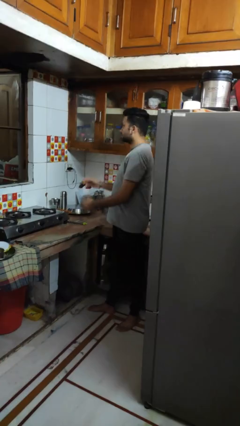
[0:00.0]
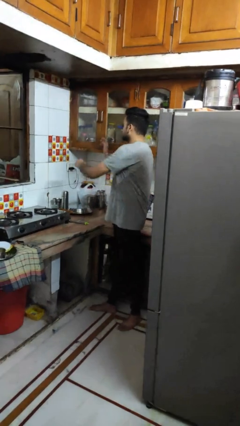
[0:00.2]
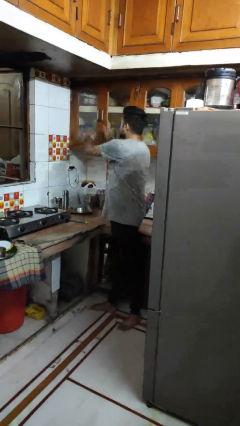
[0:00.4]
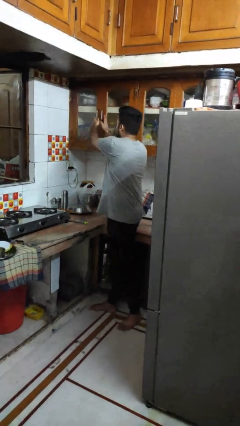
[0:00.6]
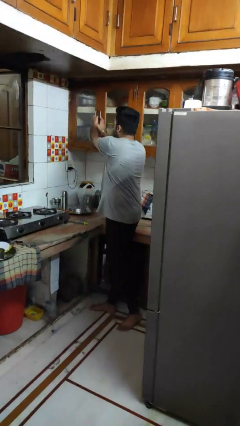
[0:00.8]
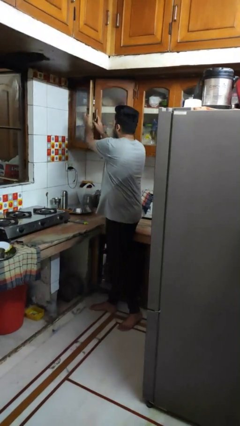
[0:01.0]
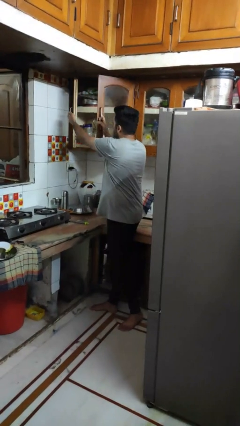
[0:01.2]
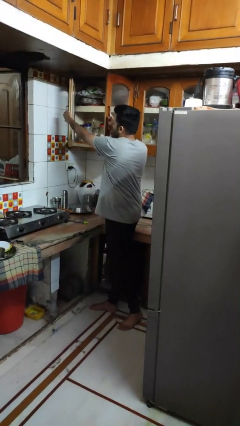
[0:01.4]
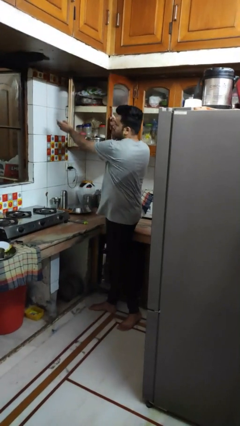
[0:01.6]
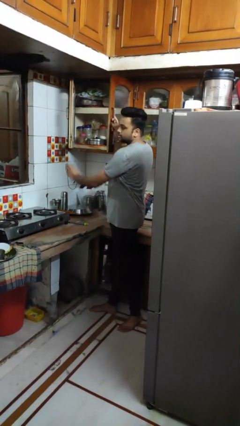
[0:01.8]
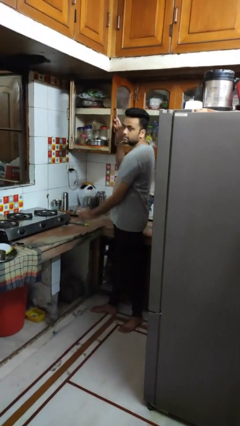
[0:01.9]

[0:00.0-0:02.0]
person opens cabinet

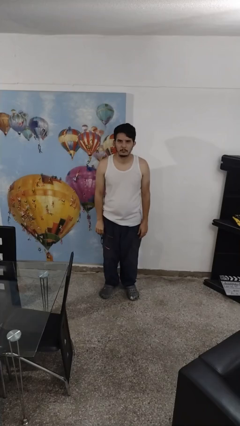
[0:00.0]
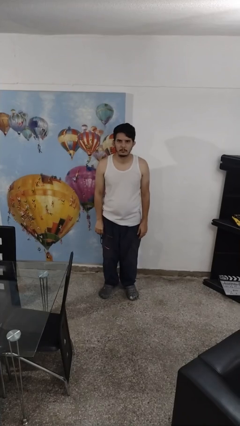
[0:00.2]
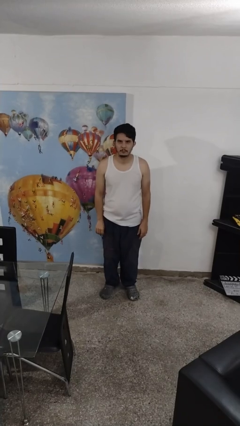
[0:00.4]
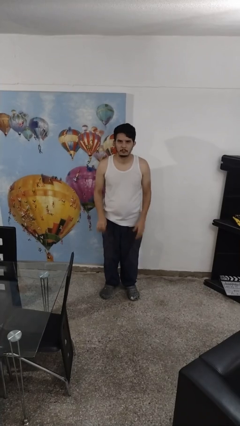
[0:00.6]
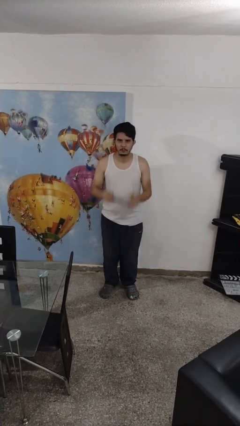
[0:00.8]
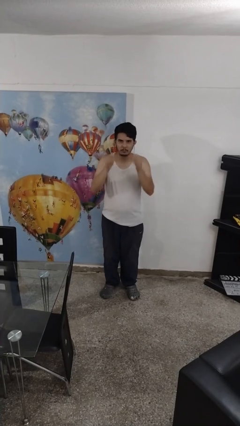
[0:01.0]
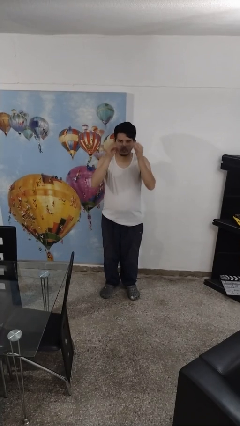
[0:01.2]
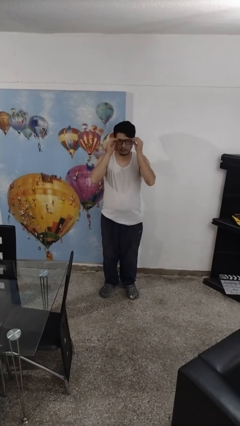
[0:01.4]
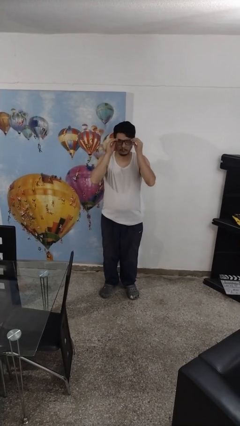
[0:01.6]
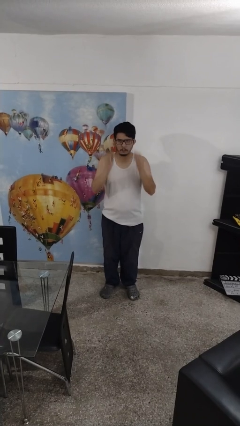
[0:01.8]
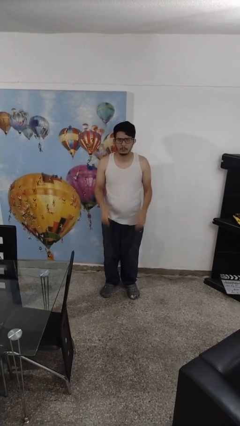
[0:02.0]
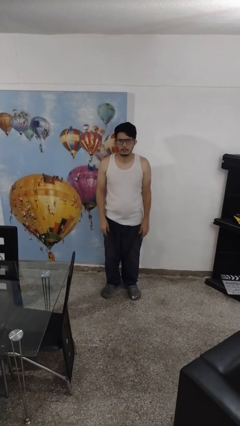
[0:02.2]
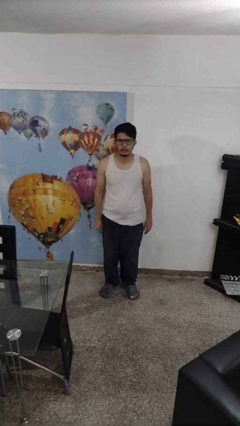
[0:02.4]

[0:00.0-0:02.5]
person puts on glasses

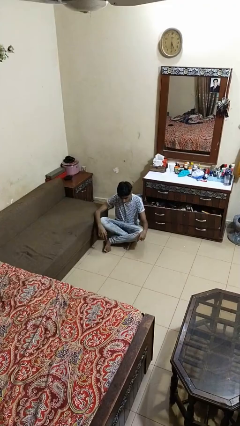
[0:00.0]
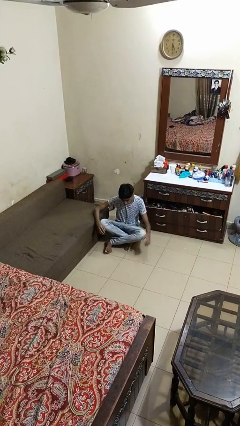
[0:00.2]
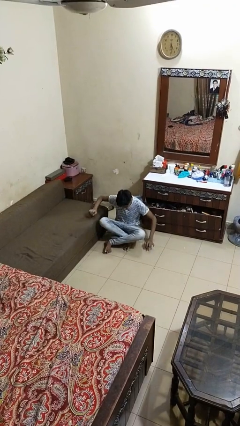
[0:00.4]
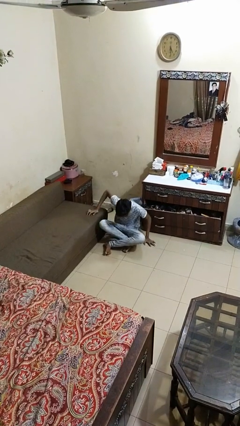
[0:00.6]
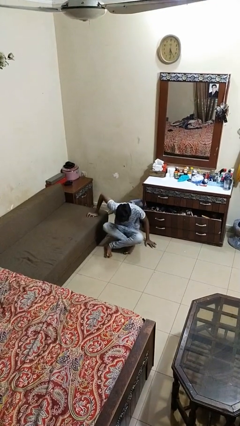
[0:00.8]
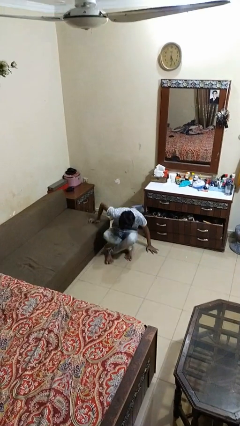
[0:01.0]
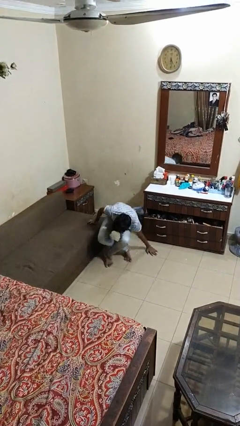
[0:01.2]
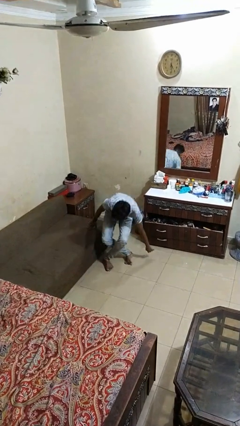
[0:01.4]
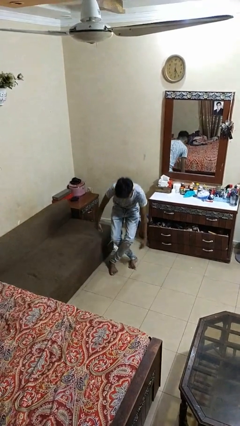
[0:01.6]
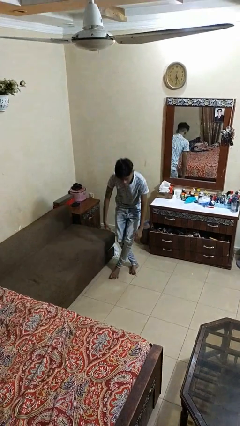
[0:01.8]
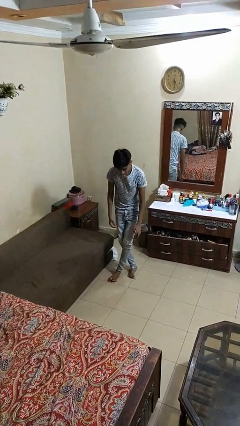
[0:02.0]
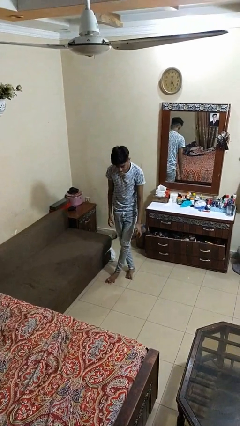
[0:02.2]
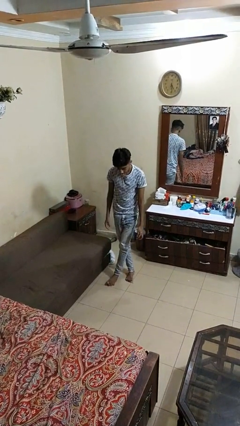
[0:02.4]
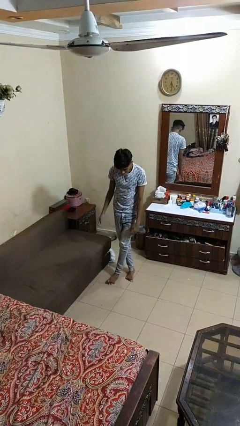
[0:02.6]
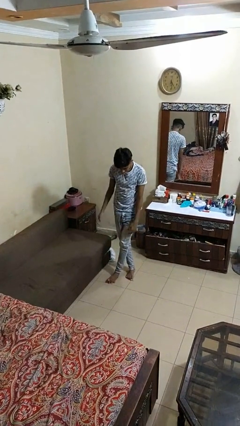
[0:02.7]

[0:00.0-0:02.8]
person stands up from floor

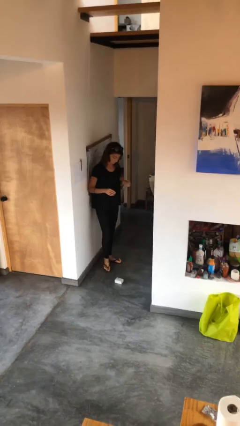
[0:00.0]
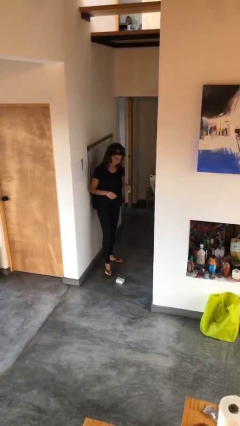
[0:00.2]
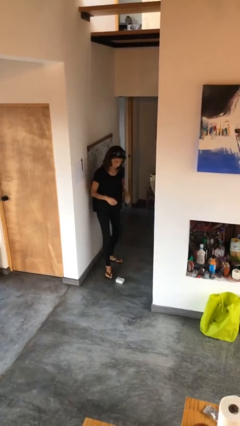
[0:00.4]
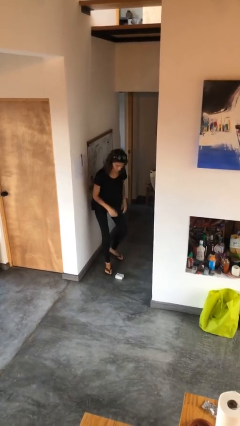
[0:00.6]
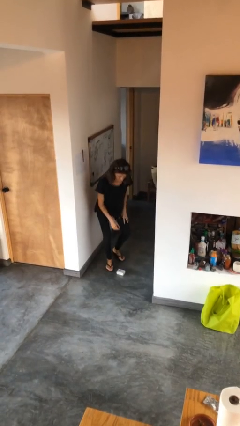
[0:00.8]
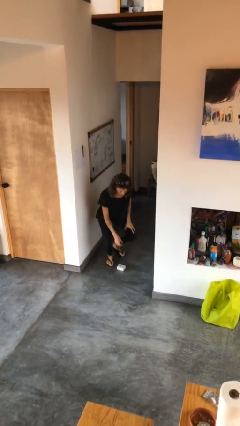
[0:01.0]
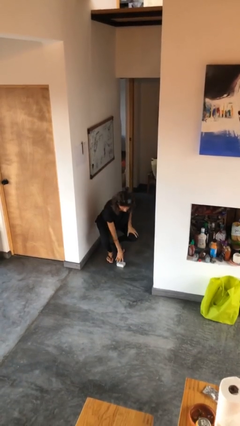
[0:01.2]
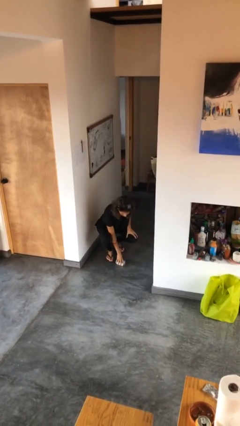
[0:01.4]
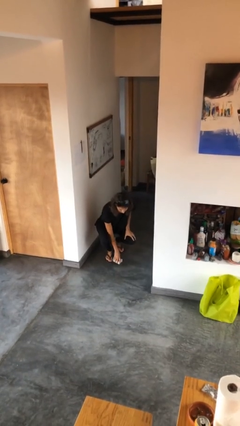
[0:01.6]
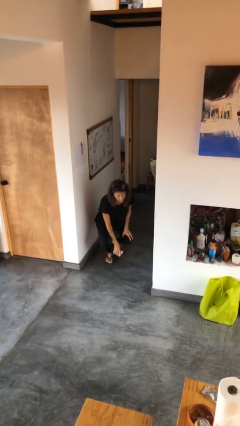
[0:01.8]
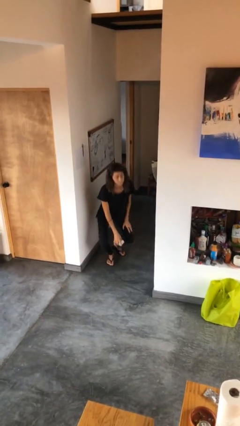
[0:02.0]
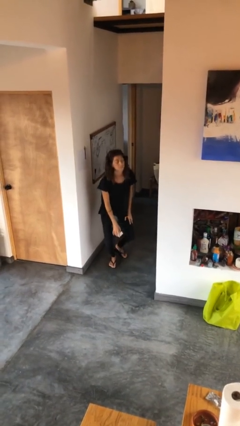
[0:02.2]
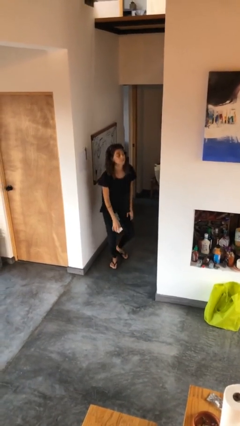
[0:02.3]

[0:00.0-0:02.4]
person picks up object from floor

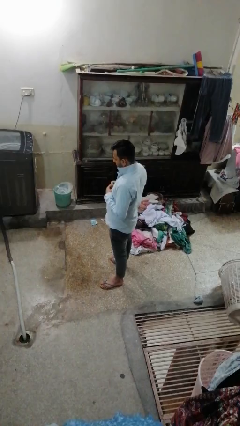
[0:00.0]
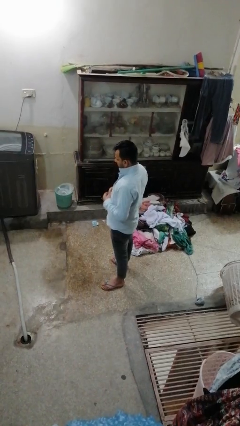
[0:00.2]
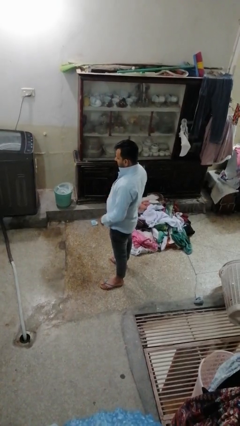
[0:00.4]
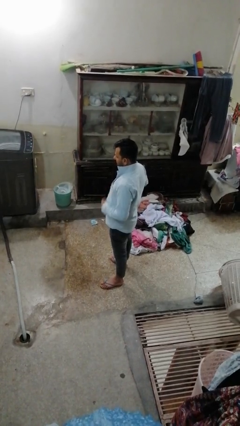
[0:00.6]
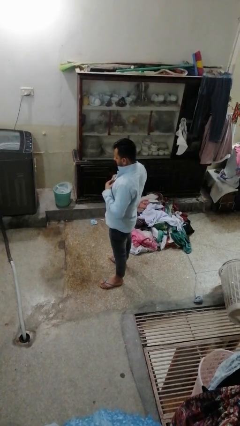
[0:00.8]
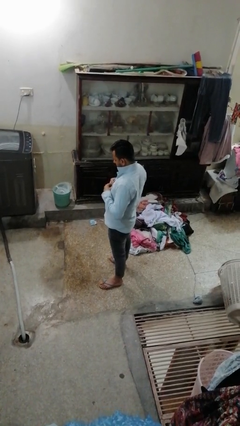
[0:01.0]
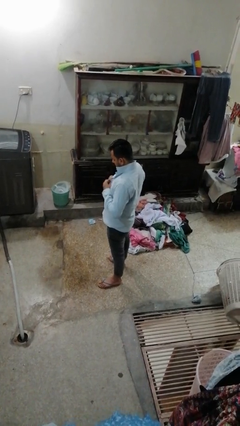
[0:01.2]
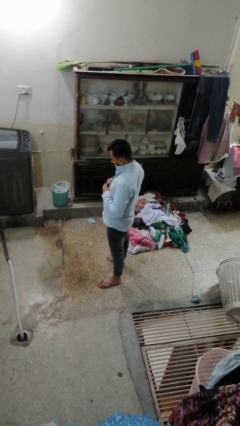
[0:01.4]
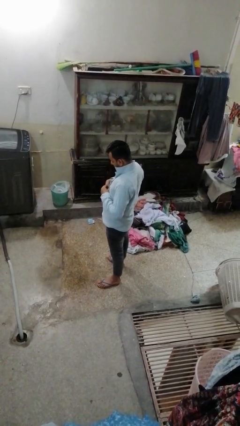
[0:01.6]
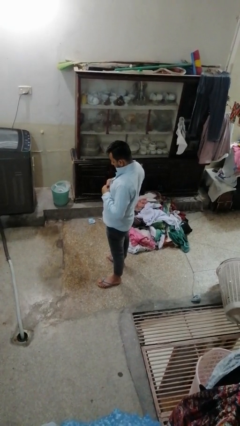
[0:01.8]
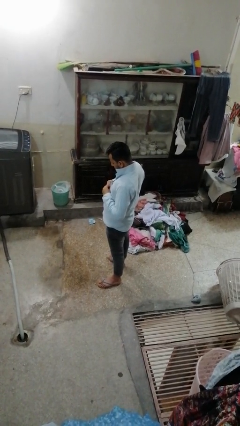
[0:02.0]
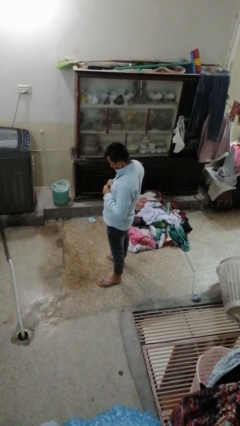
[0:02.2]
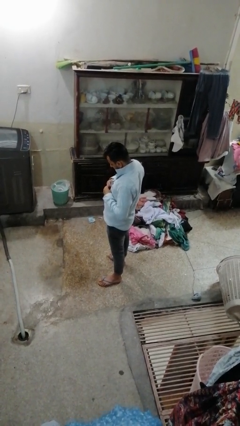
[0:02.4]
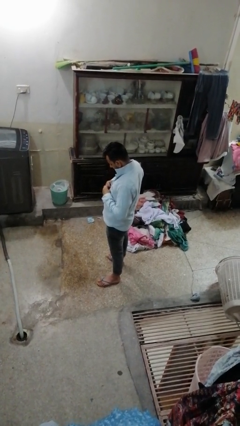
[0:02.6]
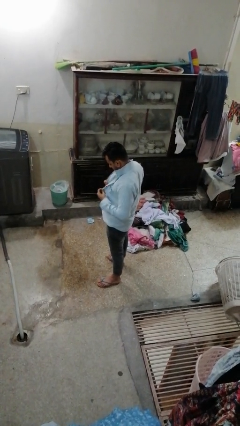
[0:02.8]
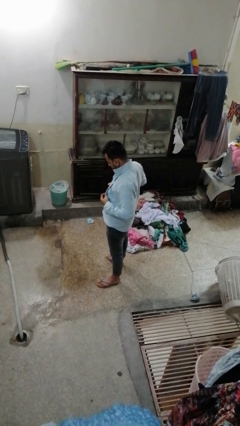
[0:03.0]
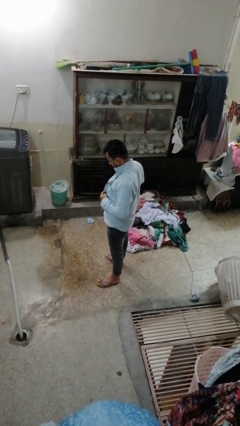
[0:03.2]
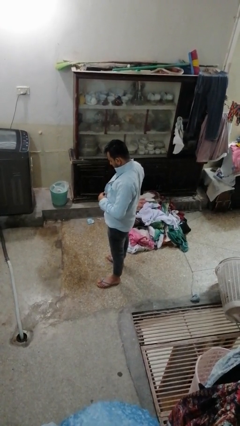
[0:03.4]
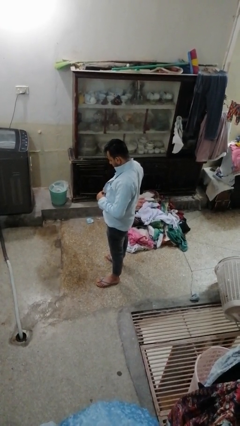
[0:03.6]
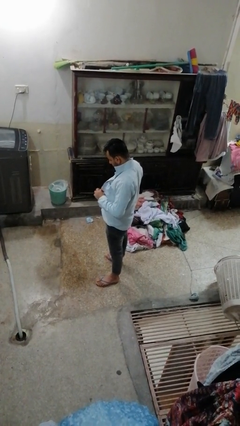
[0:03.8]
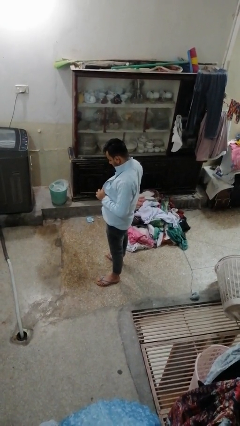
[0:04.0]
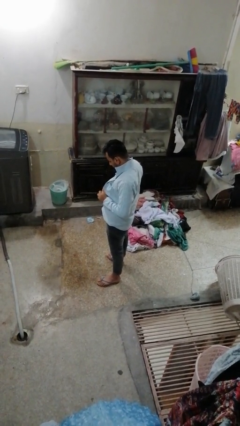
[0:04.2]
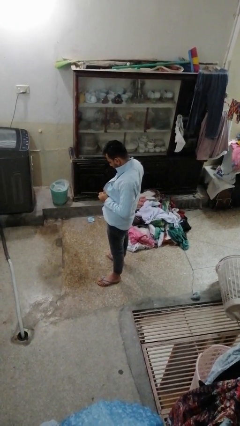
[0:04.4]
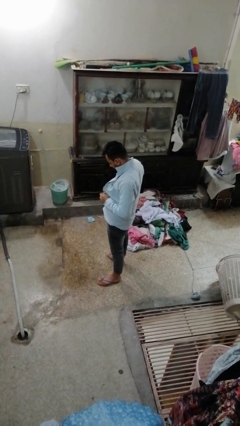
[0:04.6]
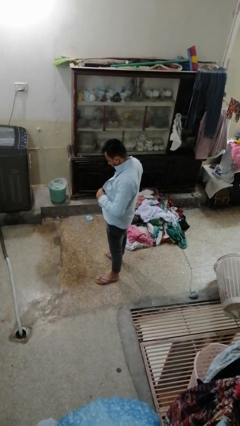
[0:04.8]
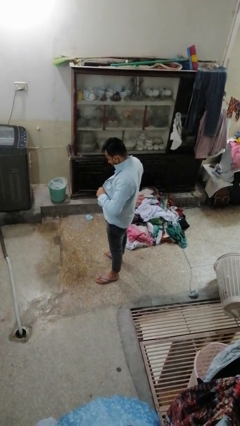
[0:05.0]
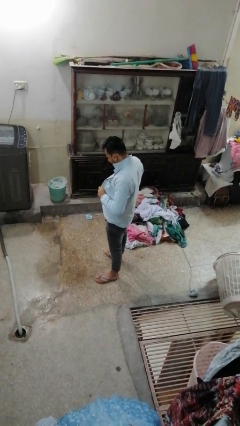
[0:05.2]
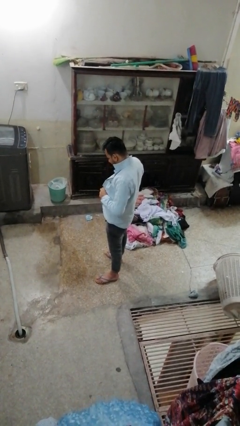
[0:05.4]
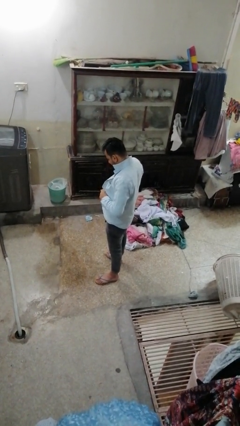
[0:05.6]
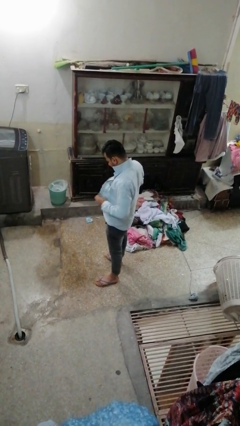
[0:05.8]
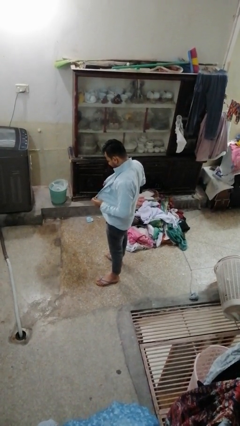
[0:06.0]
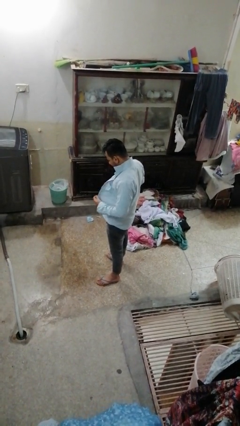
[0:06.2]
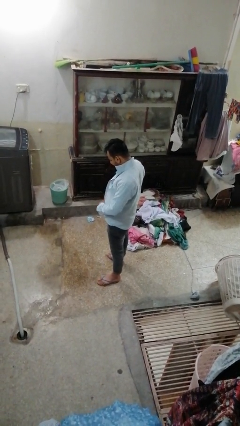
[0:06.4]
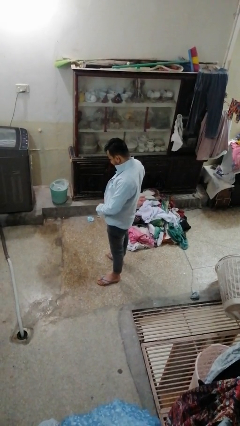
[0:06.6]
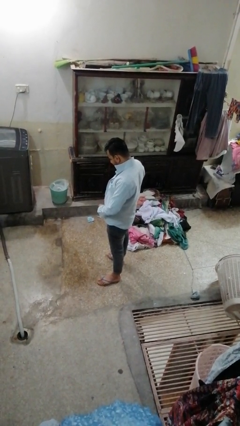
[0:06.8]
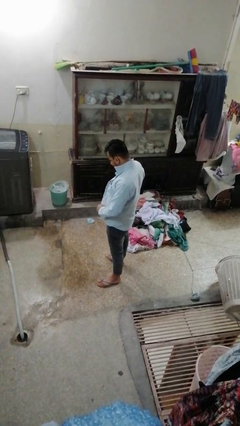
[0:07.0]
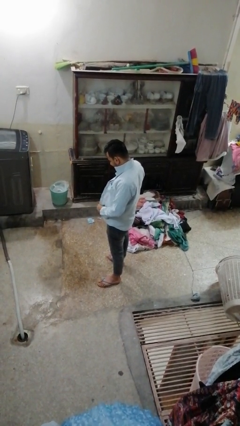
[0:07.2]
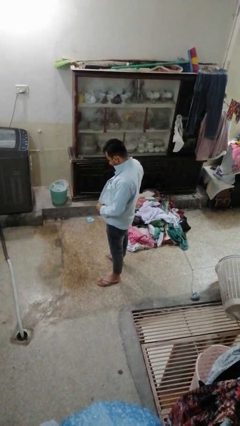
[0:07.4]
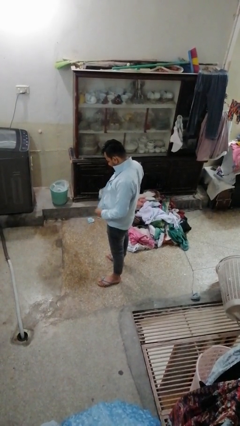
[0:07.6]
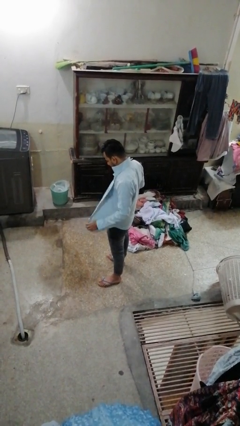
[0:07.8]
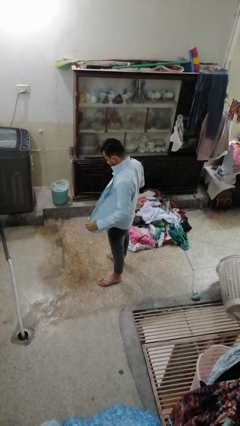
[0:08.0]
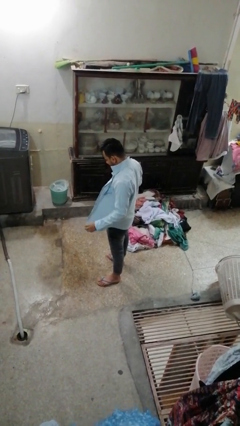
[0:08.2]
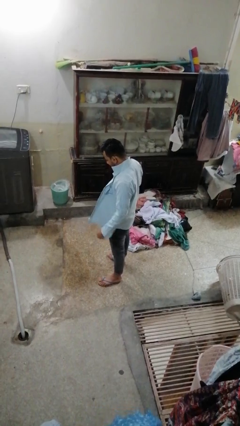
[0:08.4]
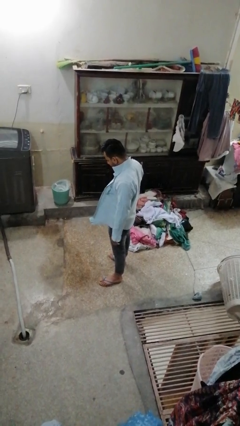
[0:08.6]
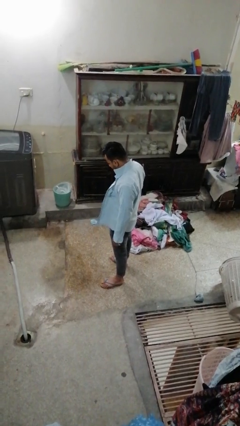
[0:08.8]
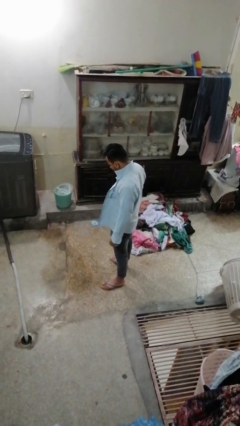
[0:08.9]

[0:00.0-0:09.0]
person unbuttons shirt
